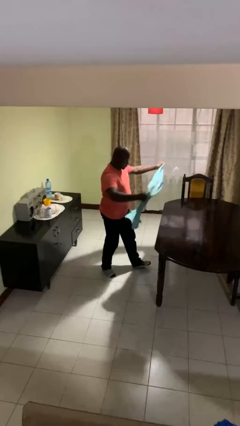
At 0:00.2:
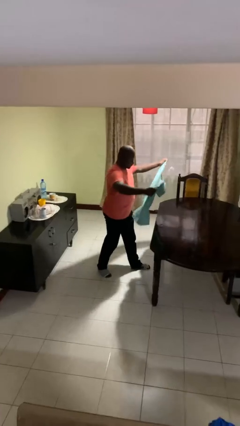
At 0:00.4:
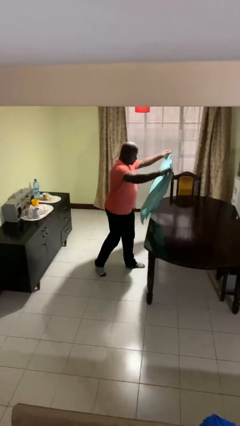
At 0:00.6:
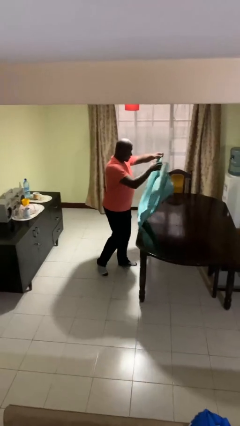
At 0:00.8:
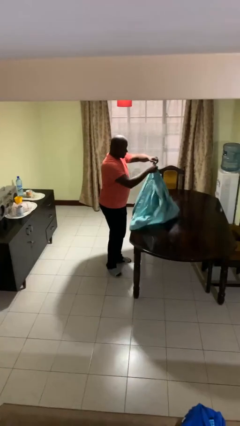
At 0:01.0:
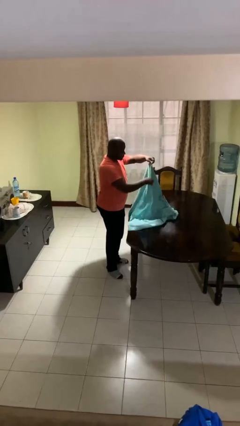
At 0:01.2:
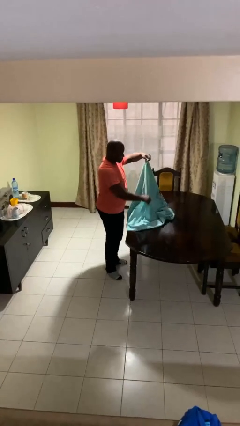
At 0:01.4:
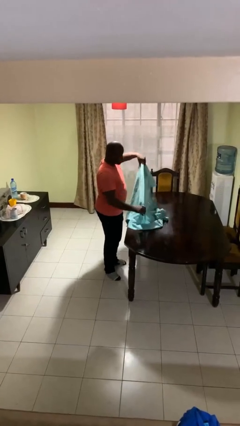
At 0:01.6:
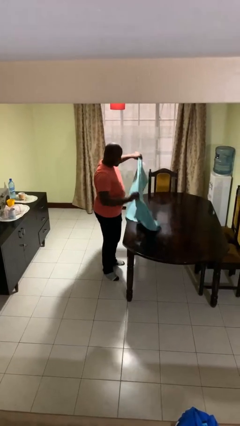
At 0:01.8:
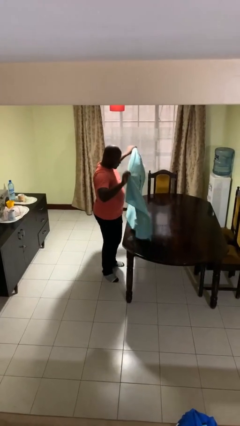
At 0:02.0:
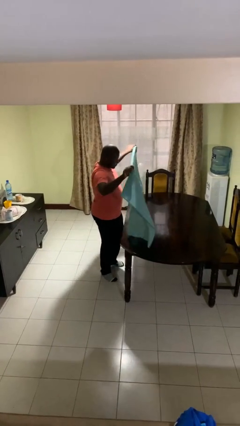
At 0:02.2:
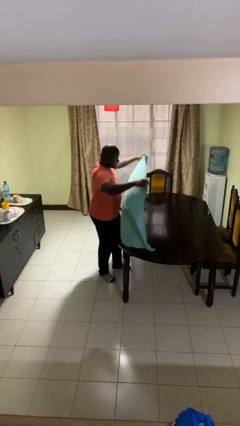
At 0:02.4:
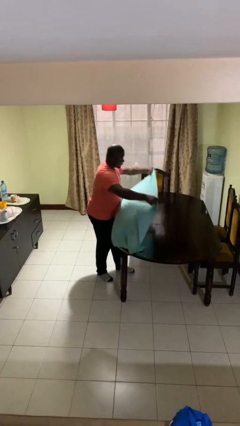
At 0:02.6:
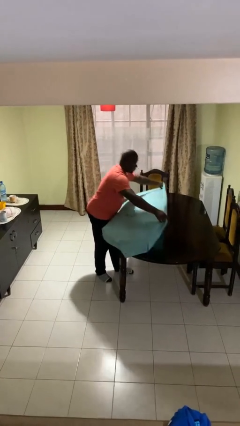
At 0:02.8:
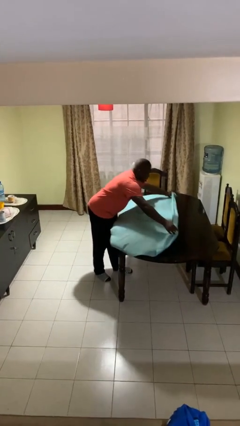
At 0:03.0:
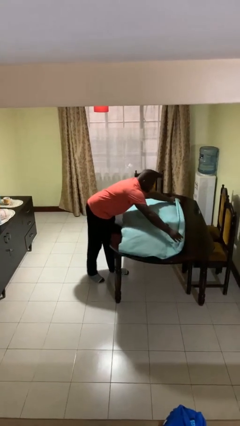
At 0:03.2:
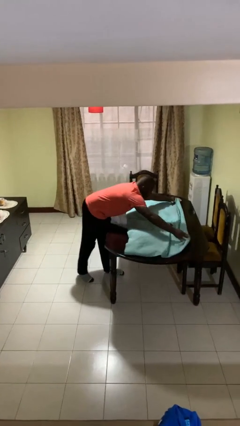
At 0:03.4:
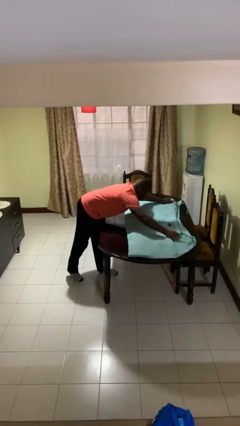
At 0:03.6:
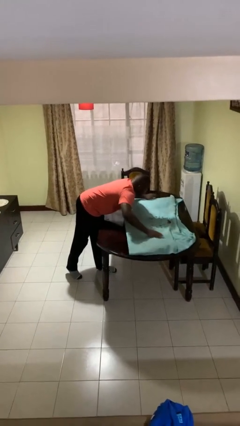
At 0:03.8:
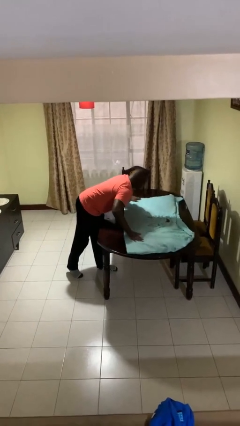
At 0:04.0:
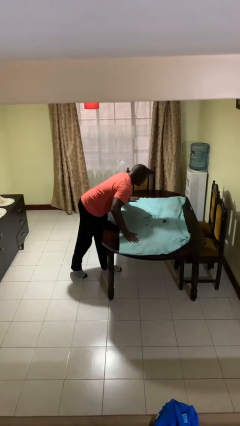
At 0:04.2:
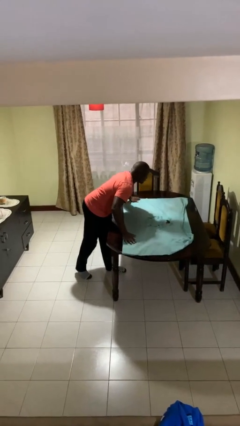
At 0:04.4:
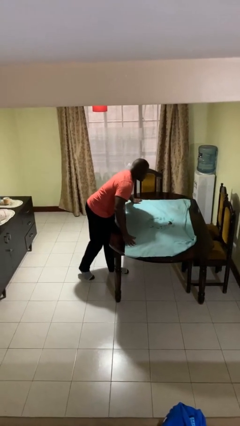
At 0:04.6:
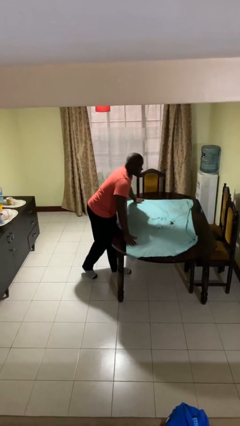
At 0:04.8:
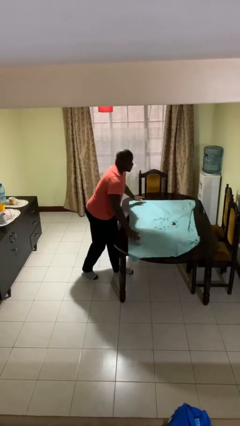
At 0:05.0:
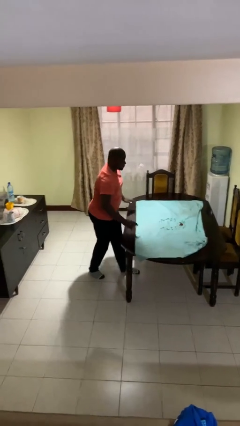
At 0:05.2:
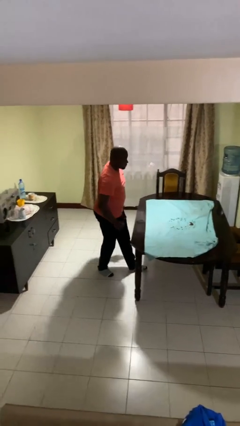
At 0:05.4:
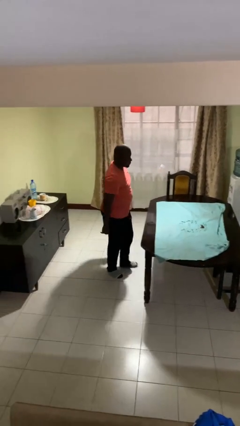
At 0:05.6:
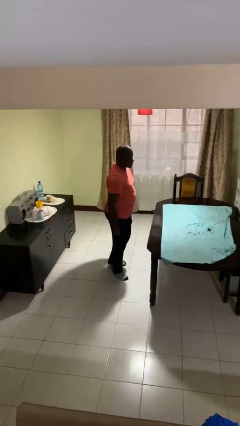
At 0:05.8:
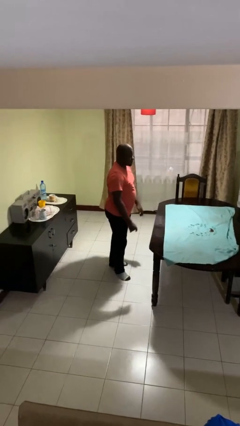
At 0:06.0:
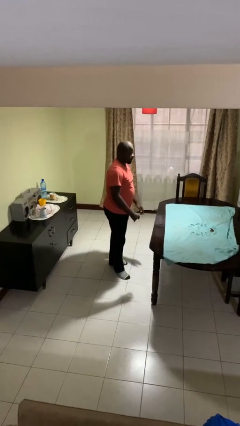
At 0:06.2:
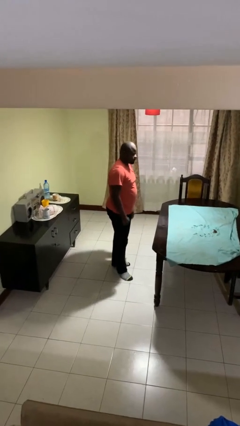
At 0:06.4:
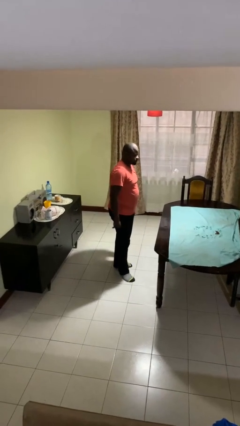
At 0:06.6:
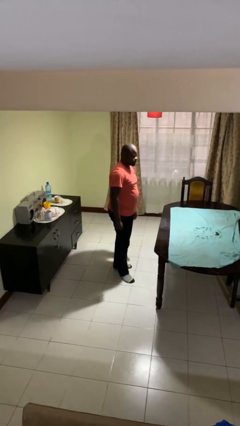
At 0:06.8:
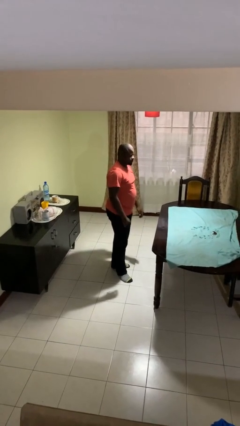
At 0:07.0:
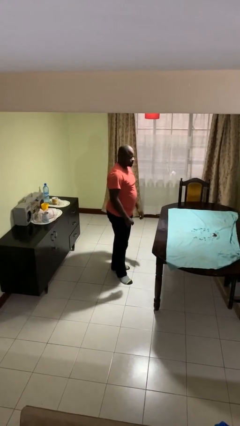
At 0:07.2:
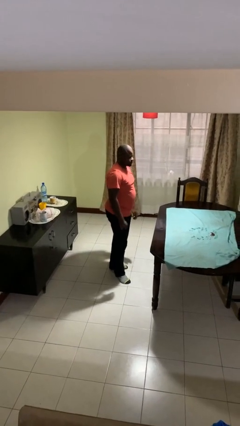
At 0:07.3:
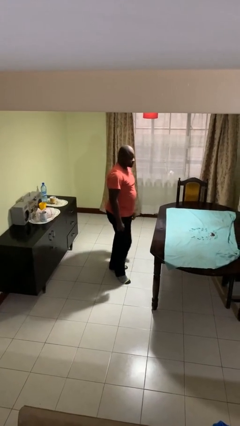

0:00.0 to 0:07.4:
person spreads tablecloth

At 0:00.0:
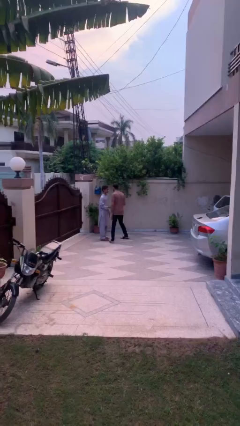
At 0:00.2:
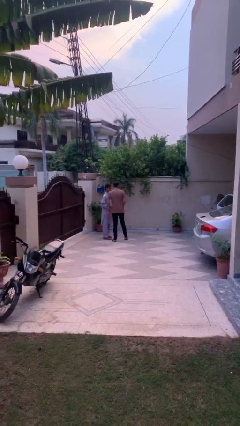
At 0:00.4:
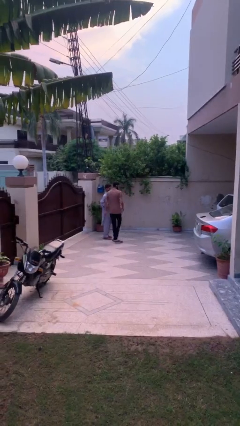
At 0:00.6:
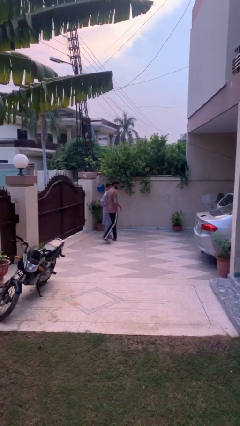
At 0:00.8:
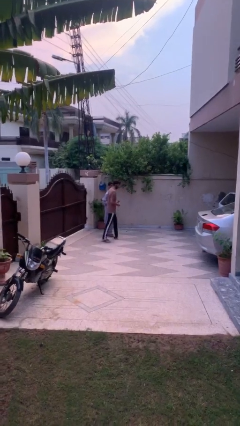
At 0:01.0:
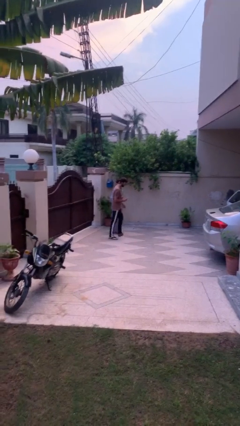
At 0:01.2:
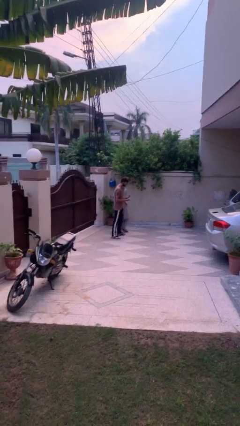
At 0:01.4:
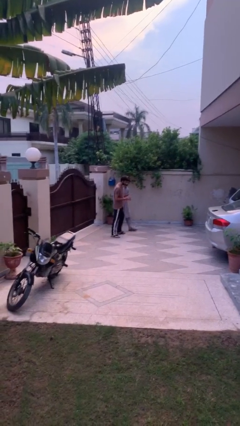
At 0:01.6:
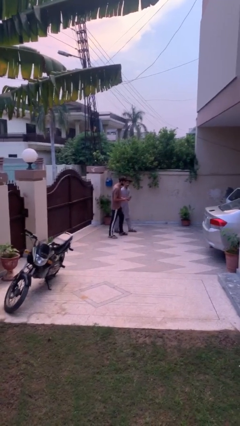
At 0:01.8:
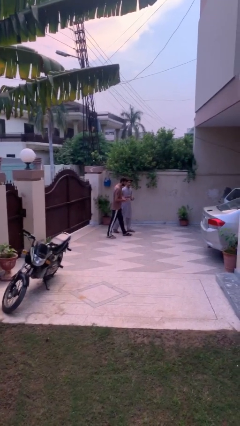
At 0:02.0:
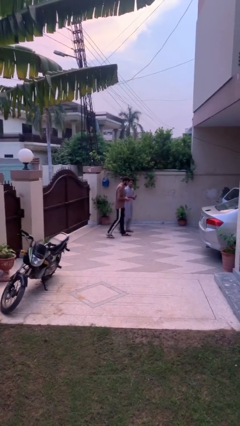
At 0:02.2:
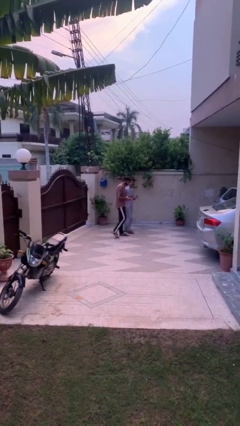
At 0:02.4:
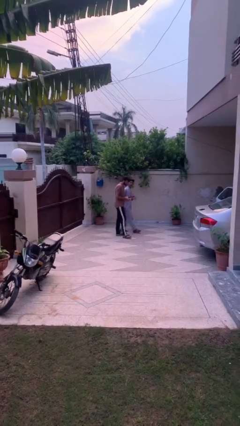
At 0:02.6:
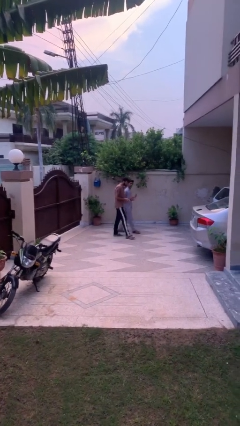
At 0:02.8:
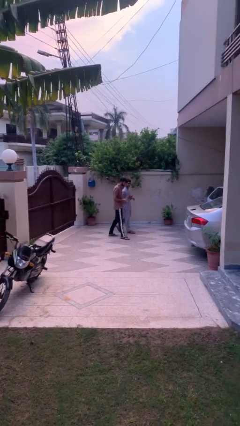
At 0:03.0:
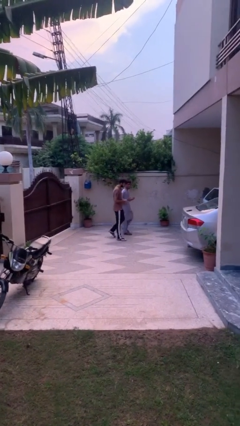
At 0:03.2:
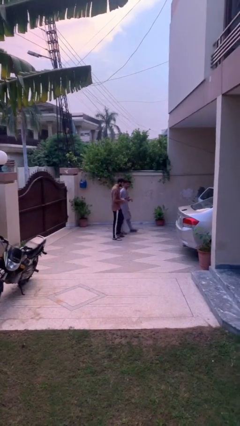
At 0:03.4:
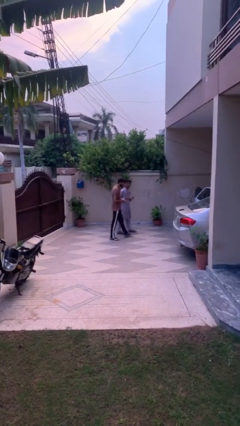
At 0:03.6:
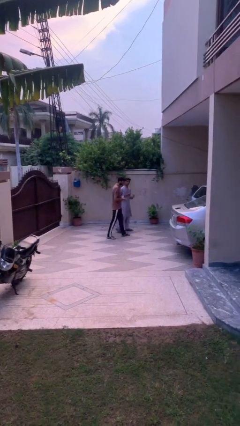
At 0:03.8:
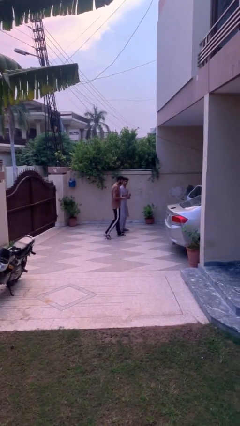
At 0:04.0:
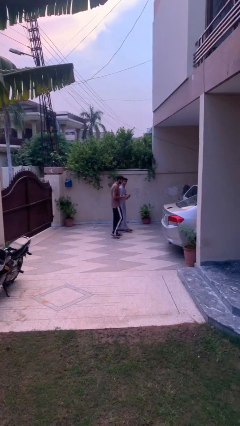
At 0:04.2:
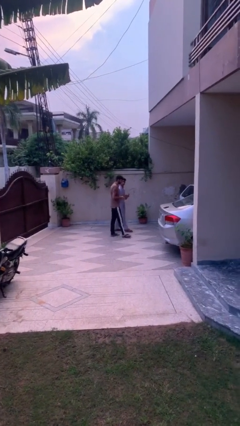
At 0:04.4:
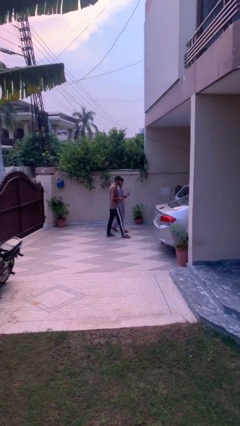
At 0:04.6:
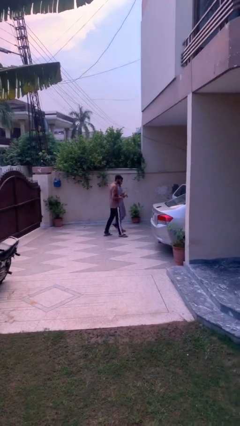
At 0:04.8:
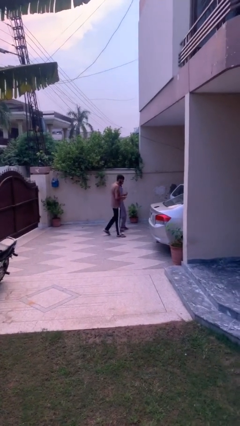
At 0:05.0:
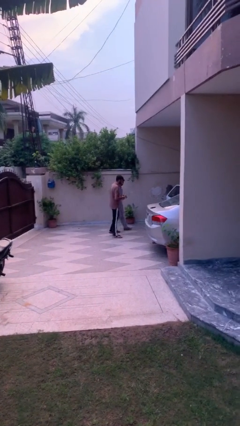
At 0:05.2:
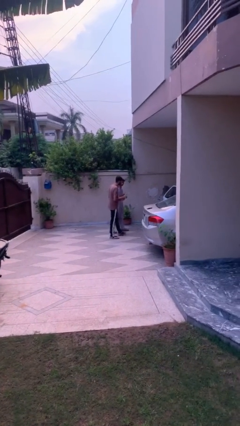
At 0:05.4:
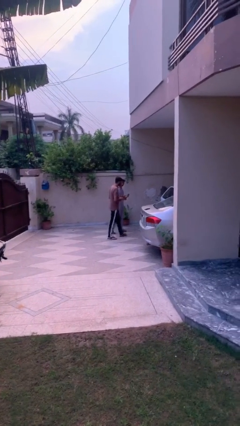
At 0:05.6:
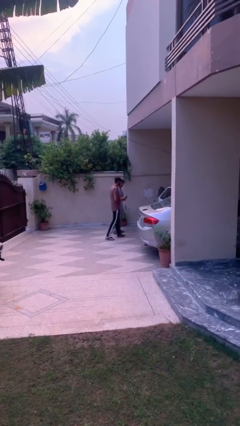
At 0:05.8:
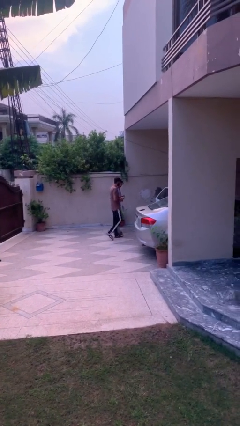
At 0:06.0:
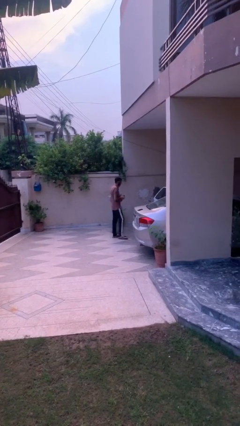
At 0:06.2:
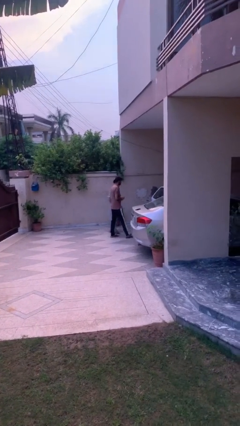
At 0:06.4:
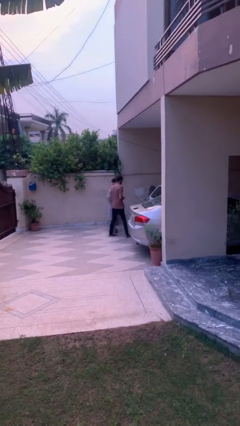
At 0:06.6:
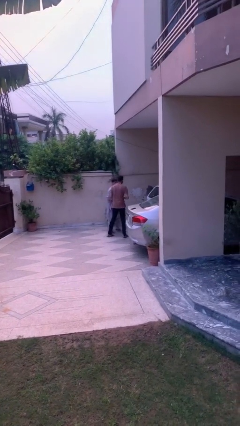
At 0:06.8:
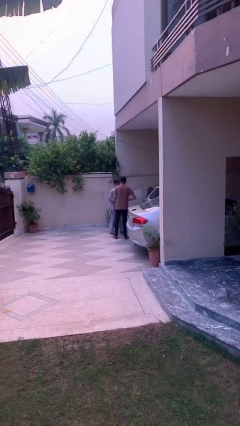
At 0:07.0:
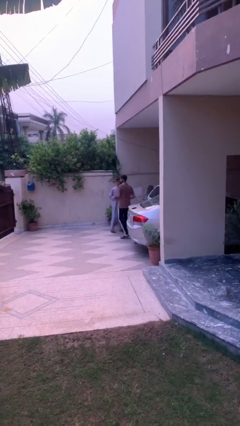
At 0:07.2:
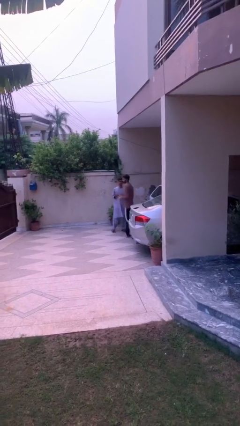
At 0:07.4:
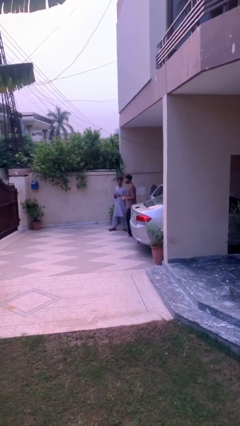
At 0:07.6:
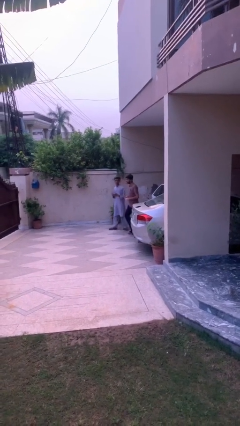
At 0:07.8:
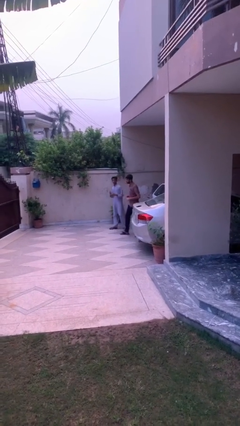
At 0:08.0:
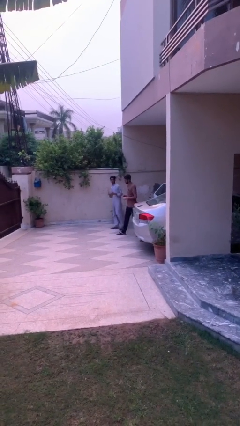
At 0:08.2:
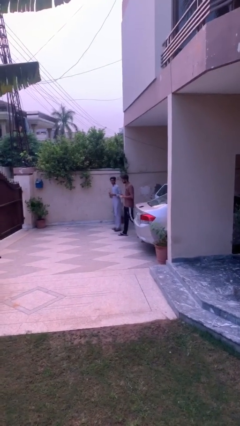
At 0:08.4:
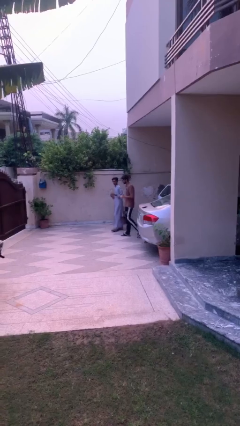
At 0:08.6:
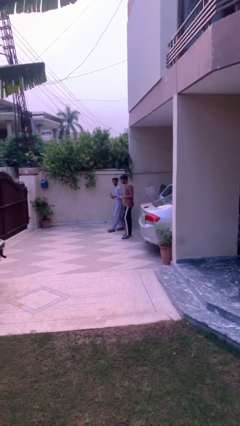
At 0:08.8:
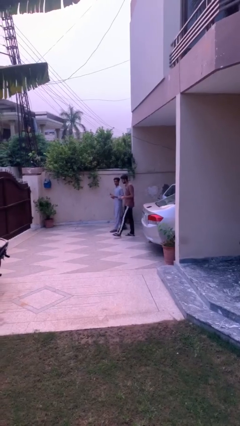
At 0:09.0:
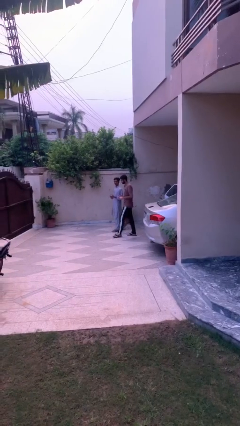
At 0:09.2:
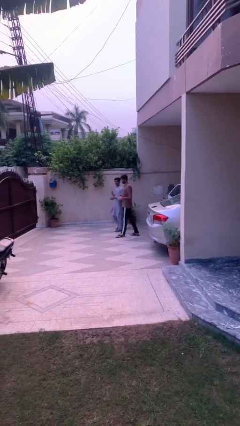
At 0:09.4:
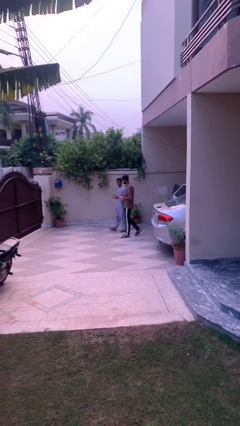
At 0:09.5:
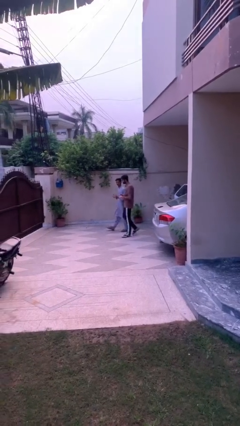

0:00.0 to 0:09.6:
person talks to person

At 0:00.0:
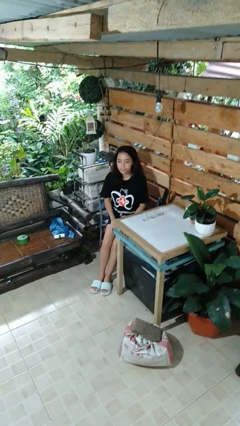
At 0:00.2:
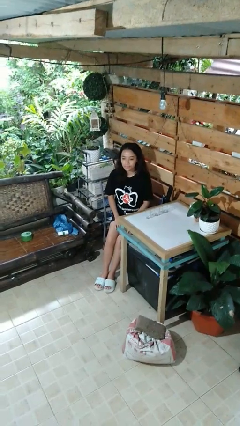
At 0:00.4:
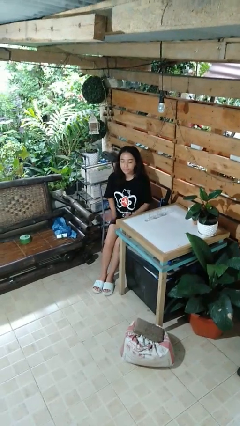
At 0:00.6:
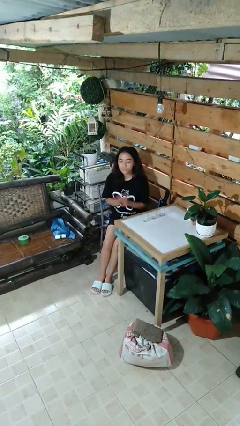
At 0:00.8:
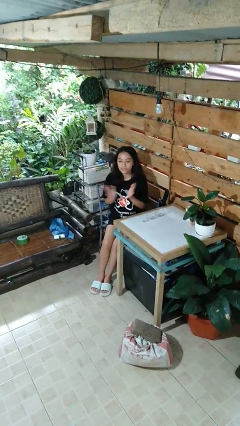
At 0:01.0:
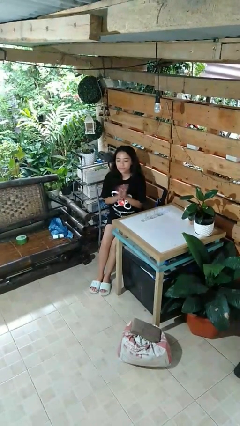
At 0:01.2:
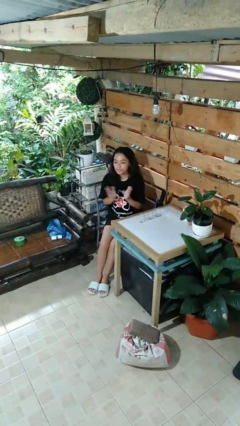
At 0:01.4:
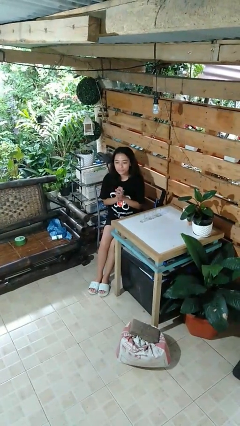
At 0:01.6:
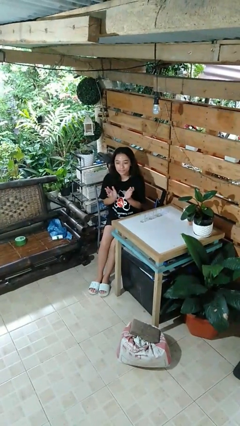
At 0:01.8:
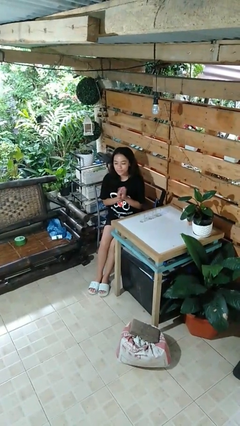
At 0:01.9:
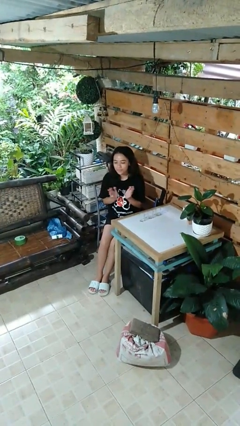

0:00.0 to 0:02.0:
person claps hands
